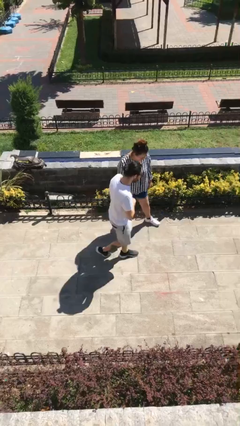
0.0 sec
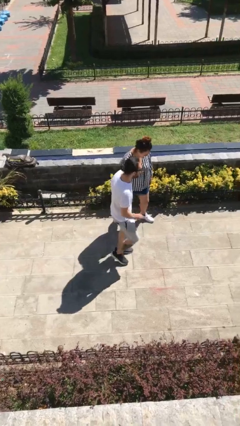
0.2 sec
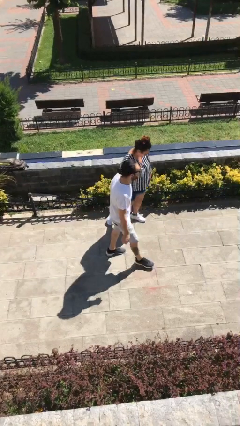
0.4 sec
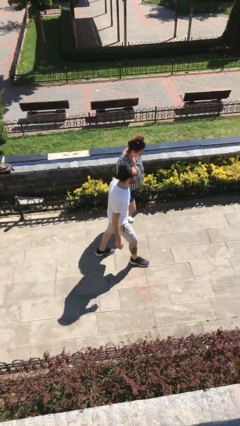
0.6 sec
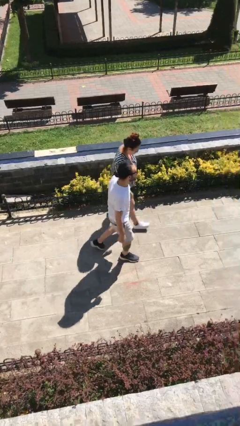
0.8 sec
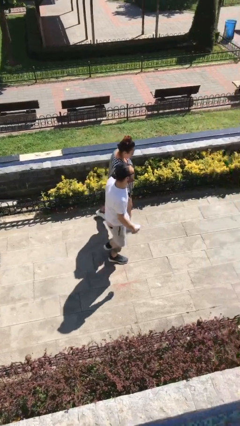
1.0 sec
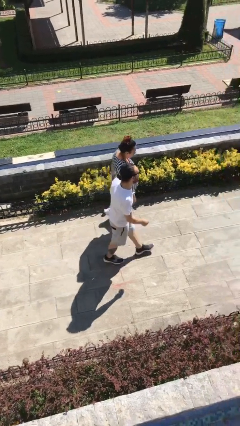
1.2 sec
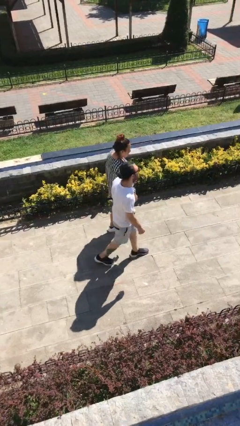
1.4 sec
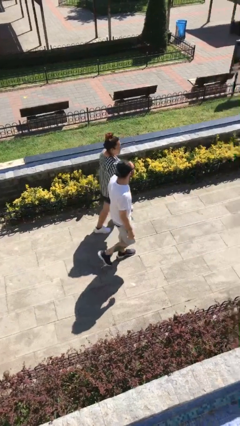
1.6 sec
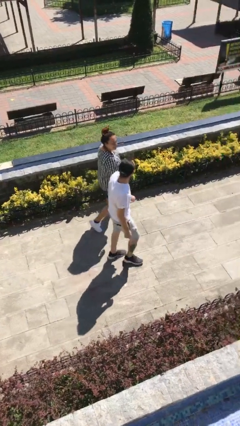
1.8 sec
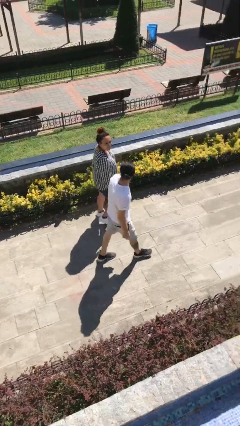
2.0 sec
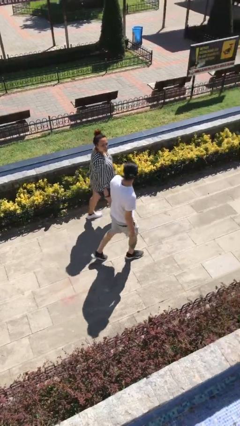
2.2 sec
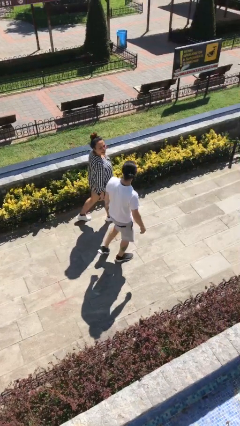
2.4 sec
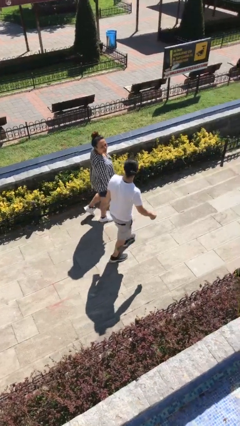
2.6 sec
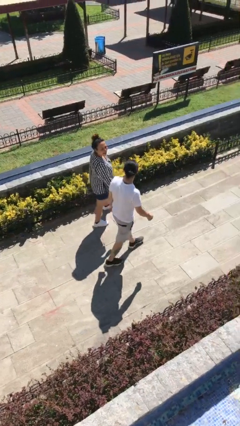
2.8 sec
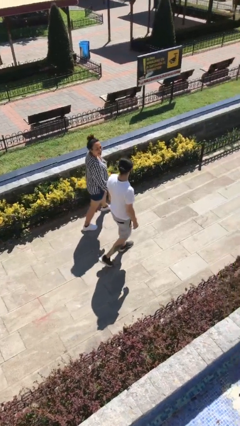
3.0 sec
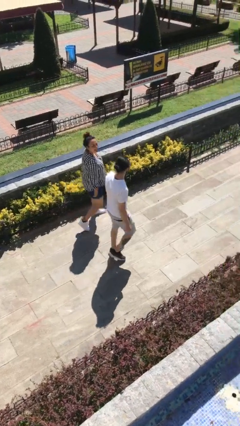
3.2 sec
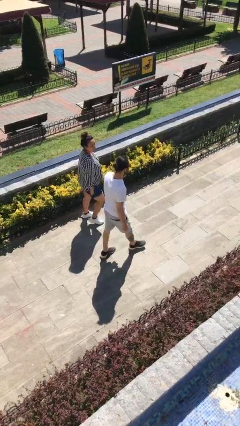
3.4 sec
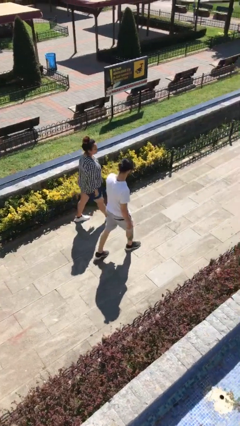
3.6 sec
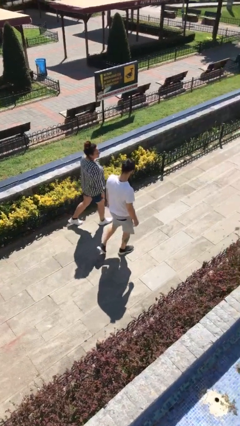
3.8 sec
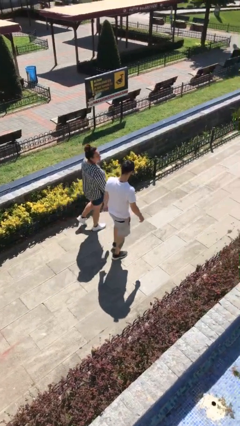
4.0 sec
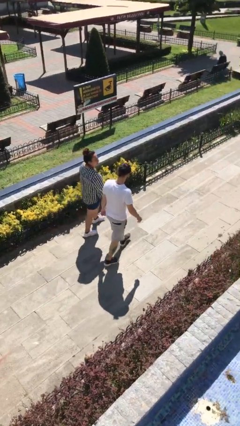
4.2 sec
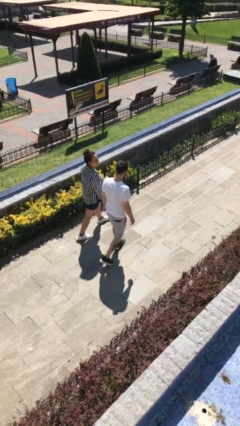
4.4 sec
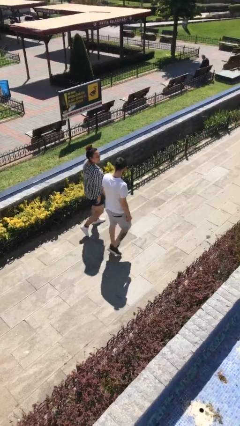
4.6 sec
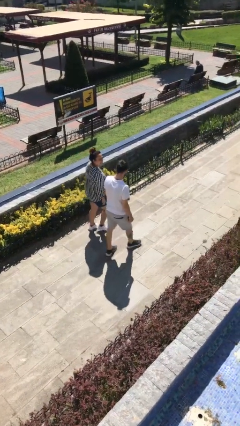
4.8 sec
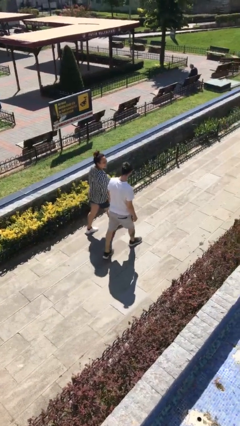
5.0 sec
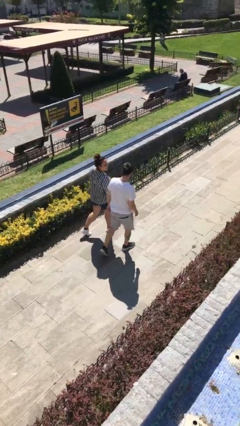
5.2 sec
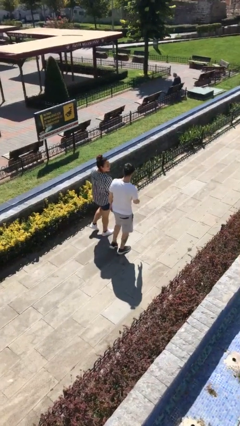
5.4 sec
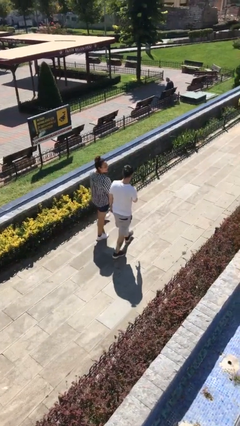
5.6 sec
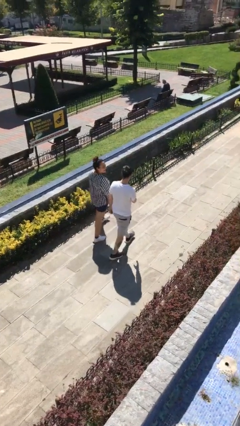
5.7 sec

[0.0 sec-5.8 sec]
person talks to person

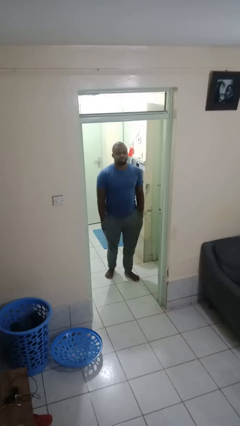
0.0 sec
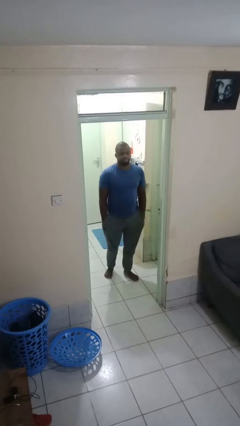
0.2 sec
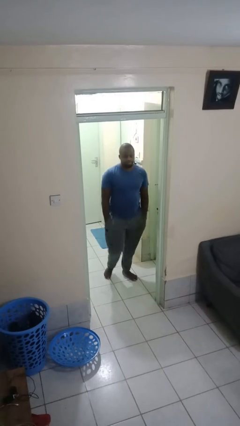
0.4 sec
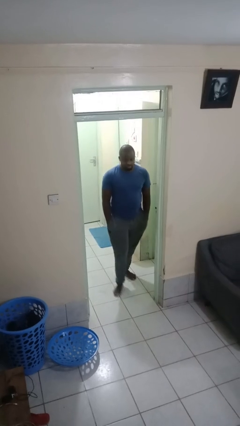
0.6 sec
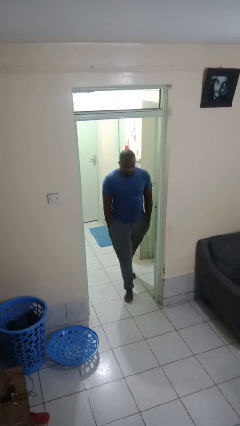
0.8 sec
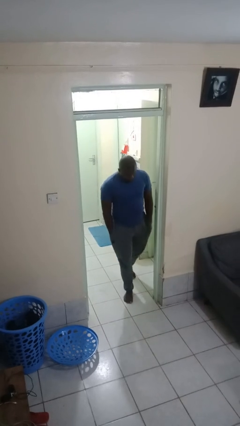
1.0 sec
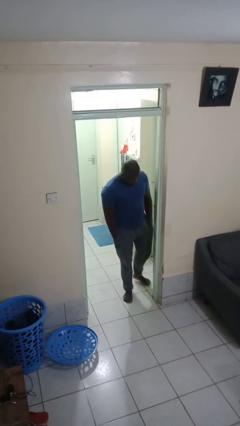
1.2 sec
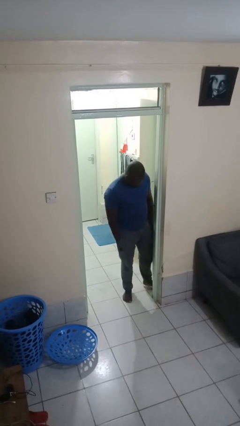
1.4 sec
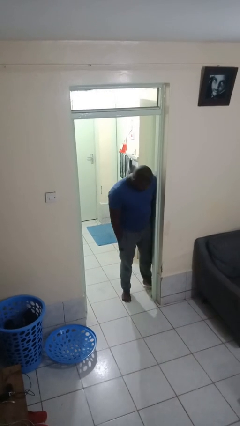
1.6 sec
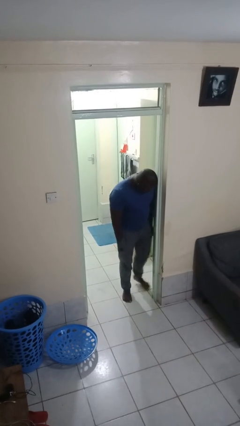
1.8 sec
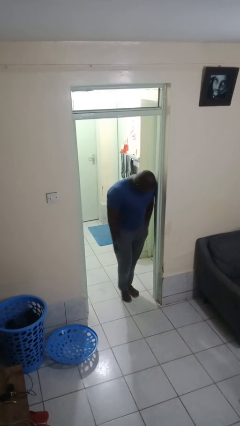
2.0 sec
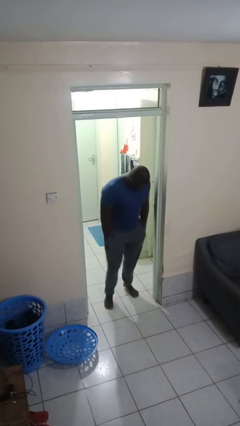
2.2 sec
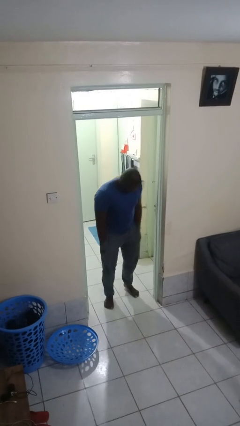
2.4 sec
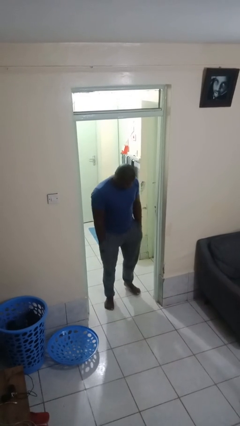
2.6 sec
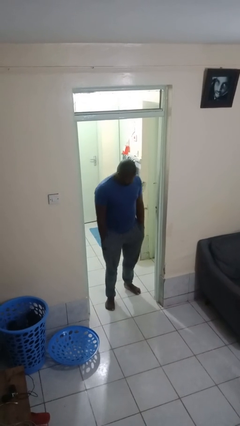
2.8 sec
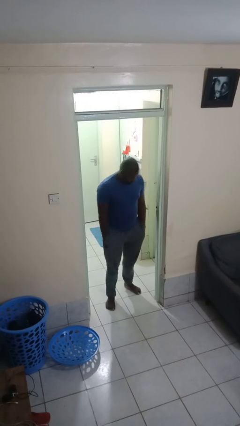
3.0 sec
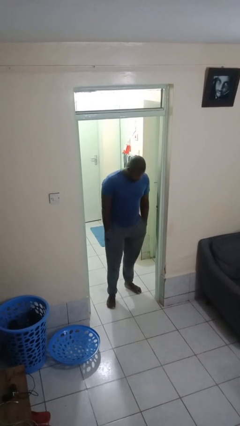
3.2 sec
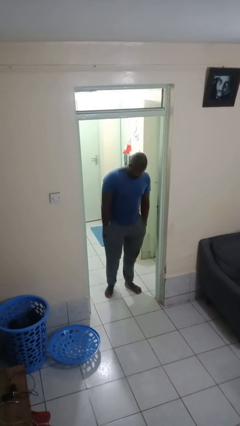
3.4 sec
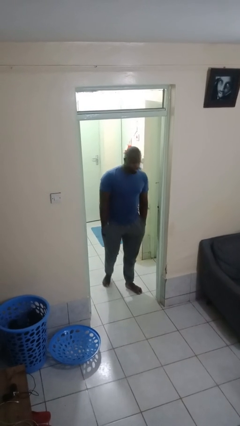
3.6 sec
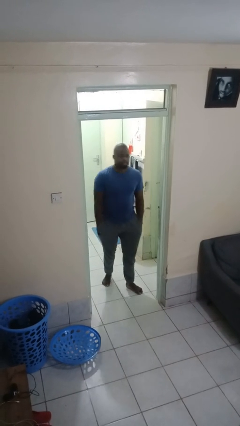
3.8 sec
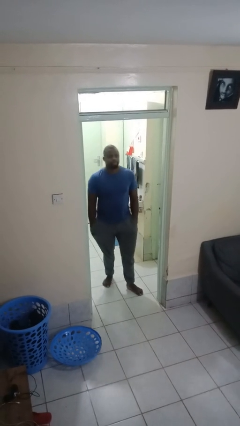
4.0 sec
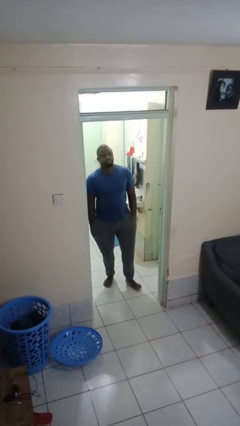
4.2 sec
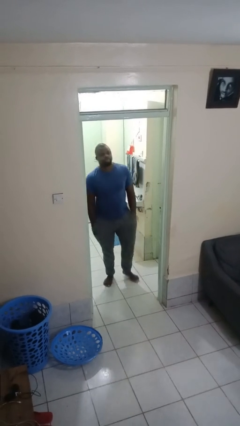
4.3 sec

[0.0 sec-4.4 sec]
person bumps into wall

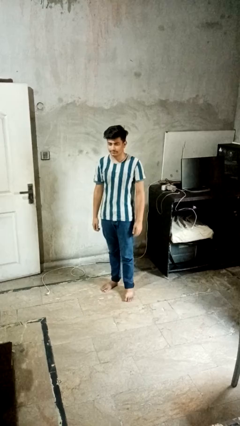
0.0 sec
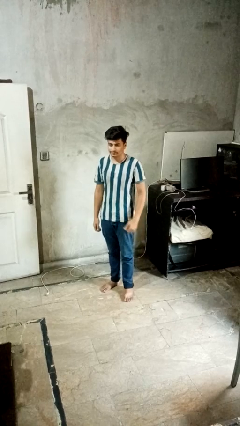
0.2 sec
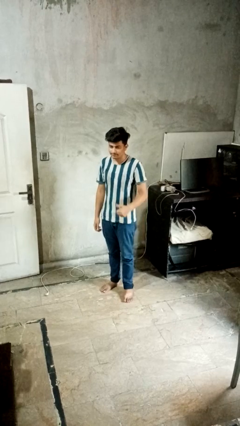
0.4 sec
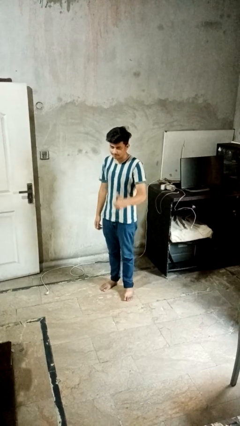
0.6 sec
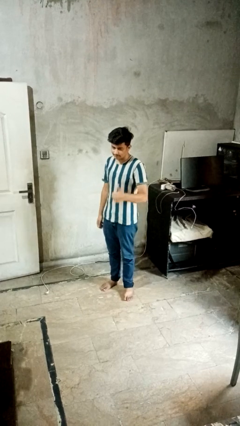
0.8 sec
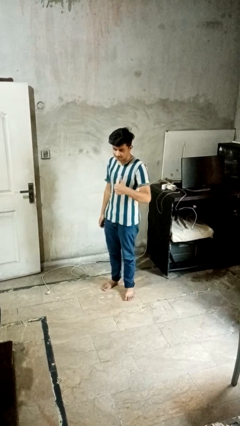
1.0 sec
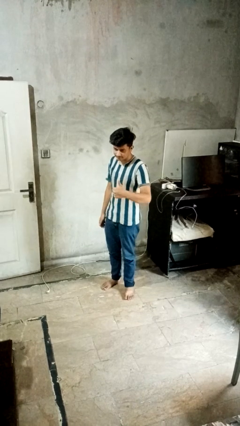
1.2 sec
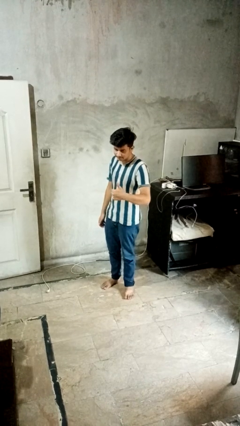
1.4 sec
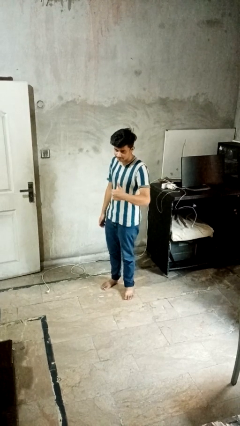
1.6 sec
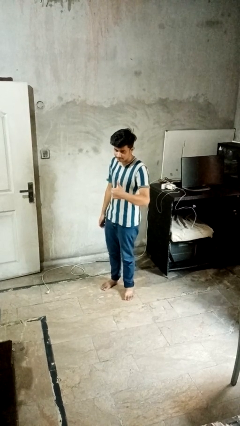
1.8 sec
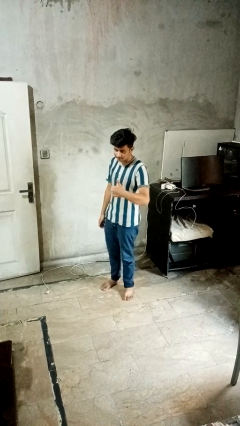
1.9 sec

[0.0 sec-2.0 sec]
person gestures thumbs up

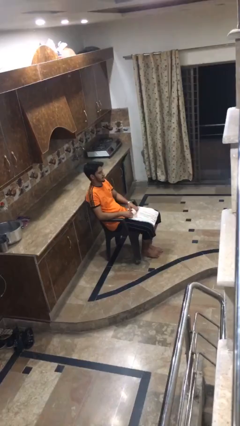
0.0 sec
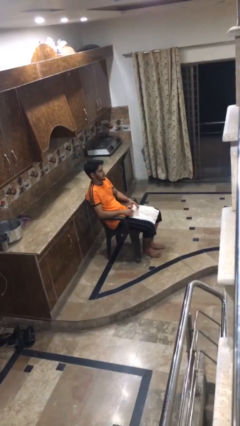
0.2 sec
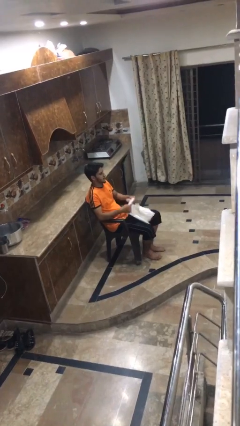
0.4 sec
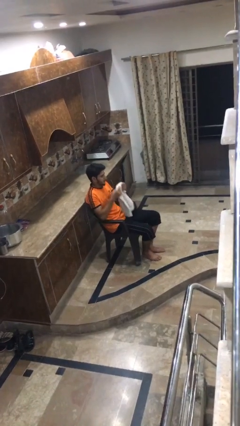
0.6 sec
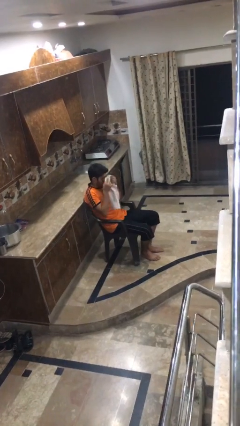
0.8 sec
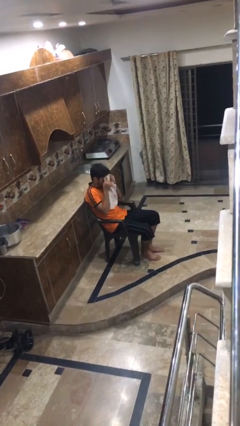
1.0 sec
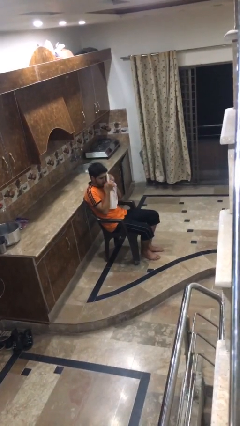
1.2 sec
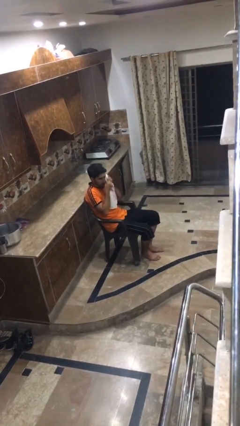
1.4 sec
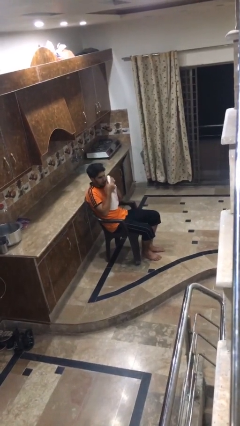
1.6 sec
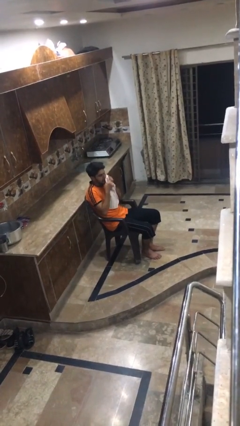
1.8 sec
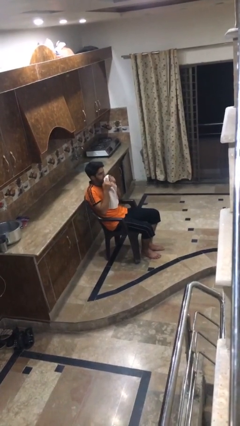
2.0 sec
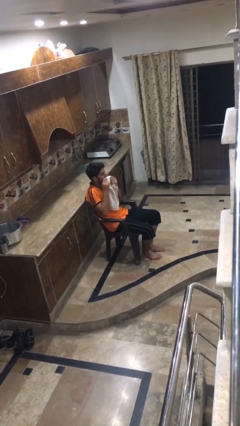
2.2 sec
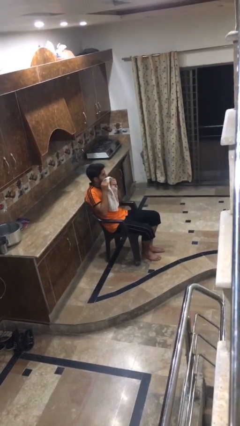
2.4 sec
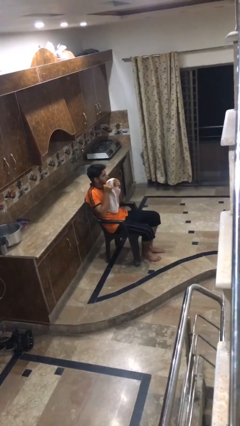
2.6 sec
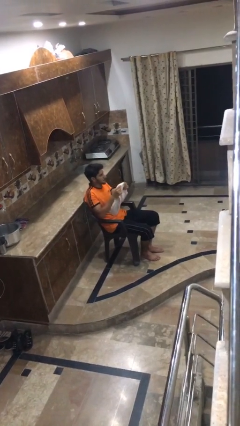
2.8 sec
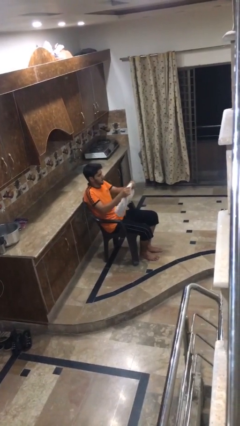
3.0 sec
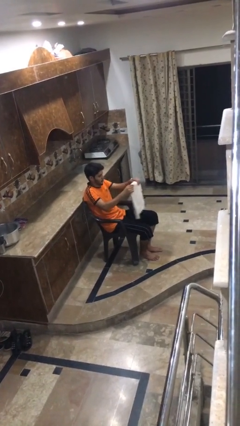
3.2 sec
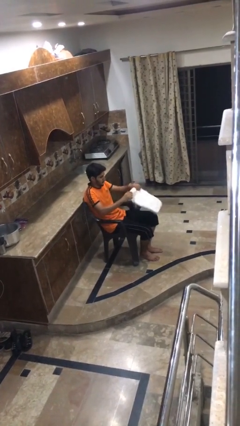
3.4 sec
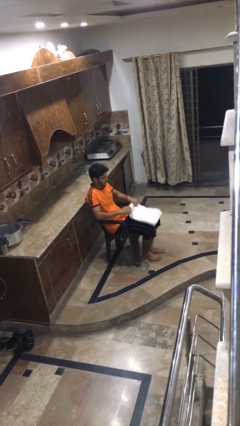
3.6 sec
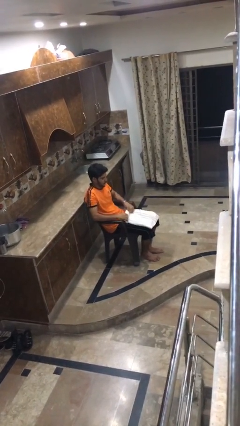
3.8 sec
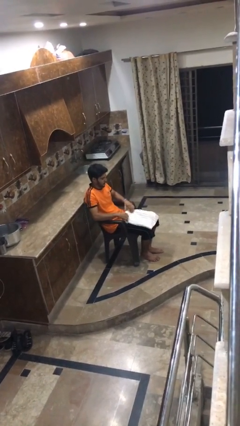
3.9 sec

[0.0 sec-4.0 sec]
person wipes mouth with napkin

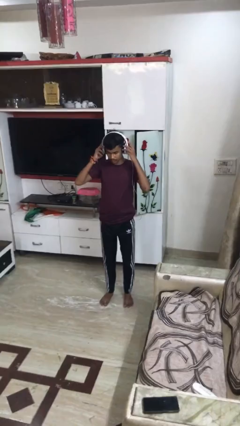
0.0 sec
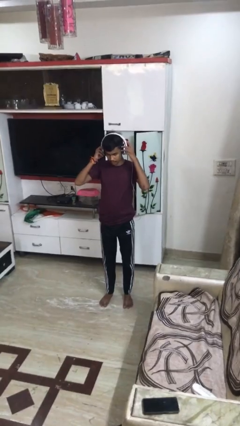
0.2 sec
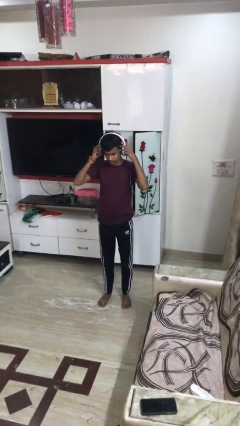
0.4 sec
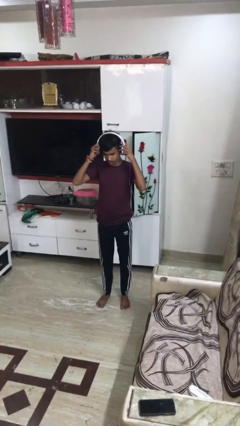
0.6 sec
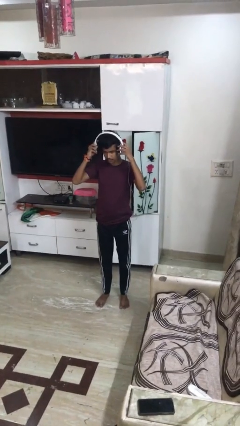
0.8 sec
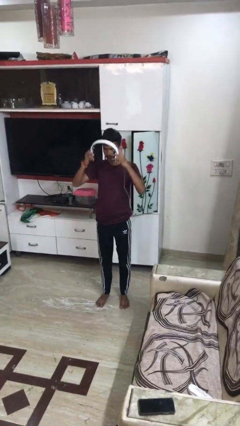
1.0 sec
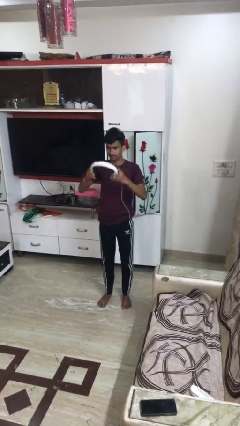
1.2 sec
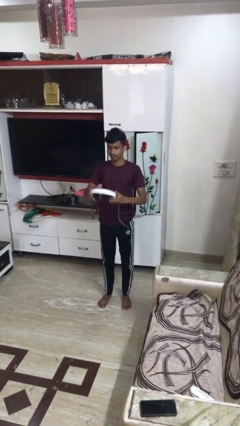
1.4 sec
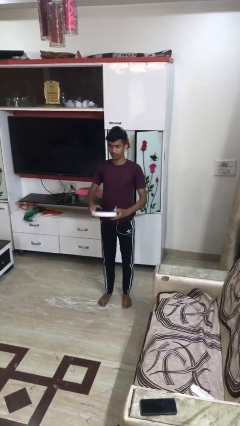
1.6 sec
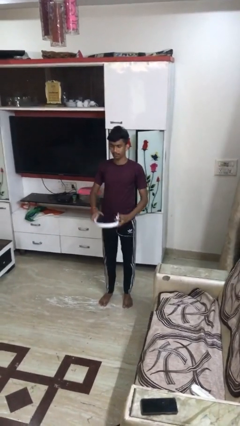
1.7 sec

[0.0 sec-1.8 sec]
person takes off headphones
